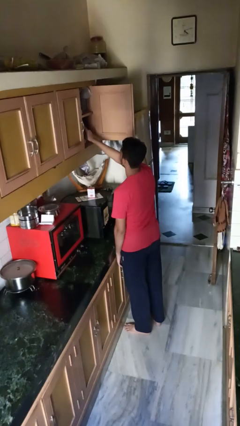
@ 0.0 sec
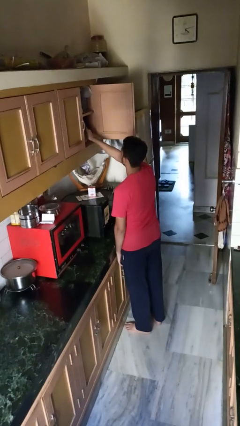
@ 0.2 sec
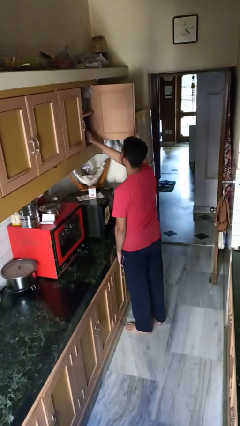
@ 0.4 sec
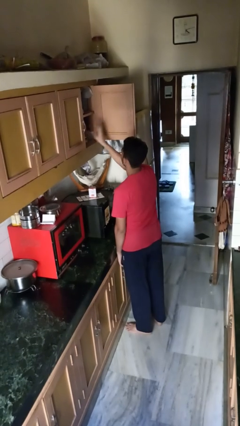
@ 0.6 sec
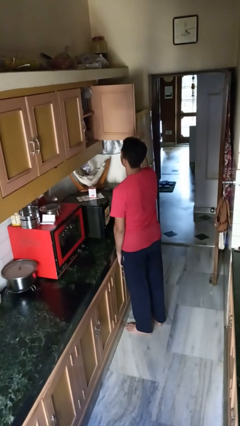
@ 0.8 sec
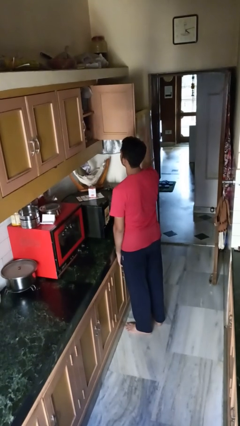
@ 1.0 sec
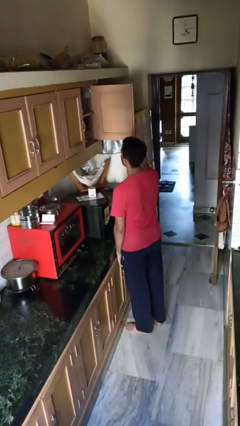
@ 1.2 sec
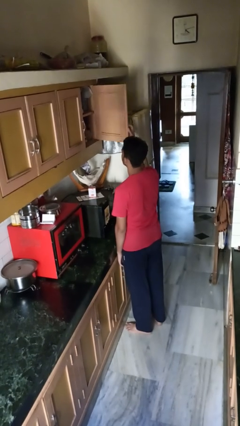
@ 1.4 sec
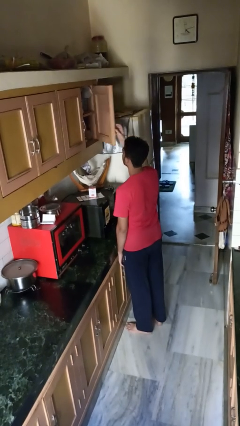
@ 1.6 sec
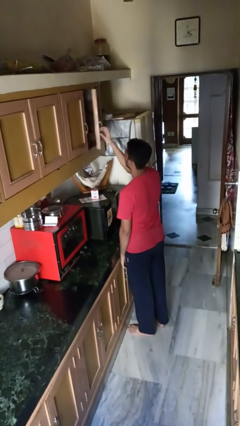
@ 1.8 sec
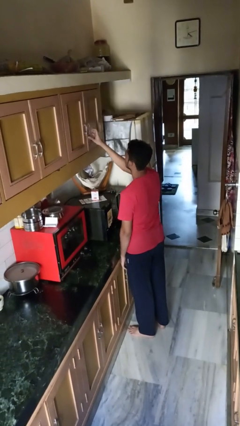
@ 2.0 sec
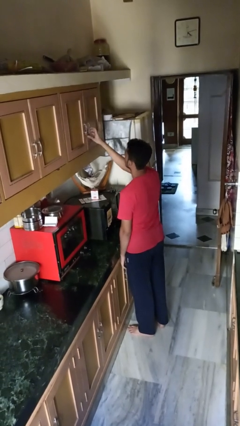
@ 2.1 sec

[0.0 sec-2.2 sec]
person puts object in cabinet

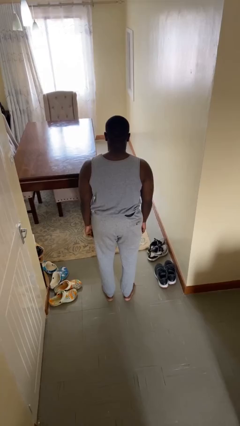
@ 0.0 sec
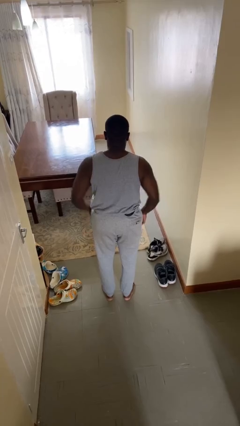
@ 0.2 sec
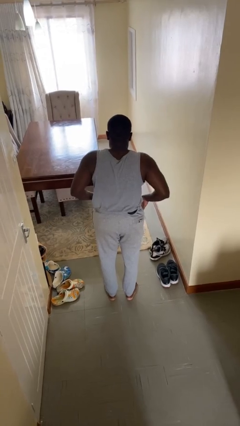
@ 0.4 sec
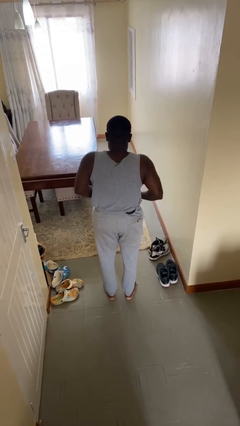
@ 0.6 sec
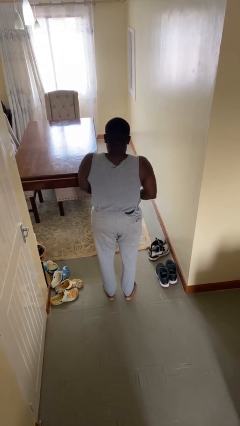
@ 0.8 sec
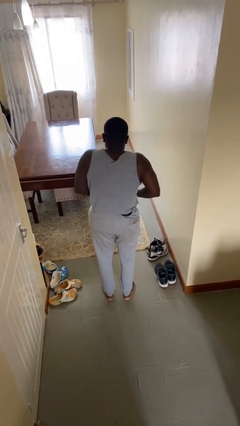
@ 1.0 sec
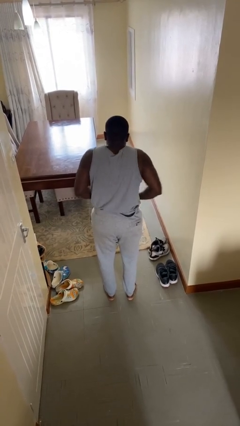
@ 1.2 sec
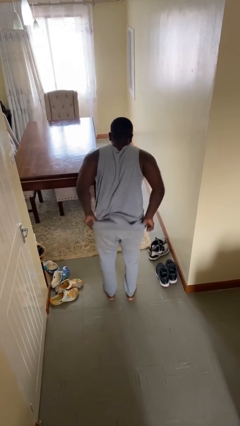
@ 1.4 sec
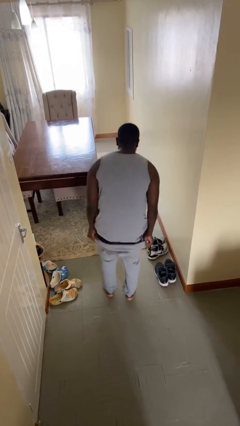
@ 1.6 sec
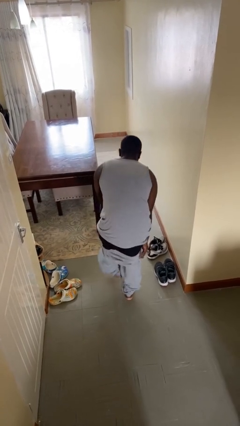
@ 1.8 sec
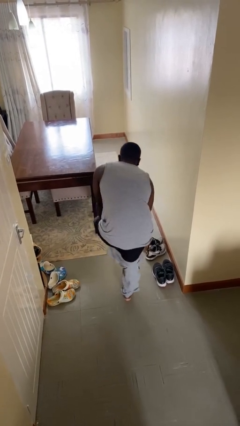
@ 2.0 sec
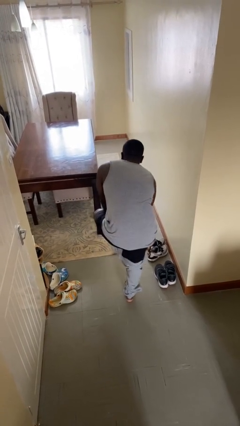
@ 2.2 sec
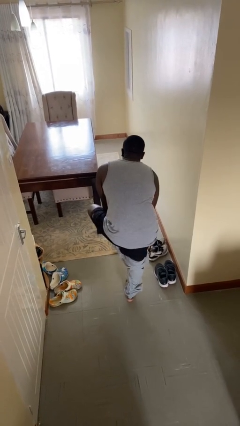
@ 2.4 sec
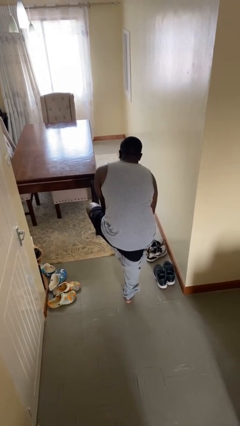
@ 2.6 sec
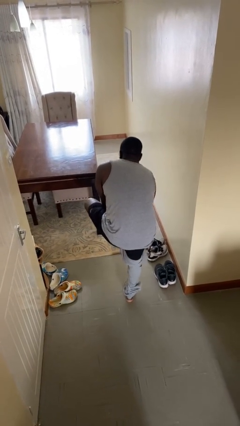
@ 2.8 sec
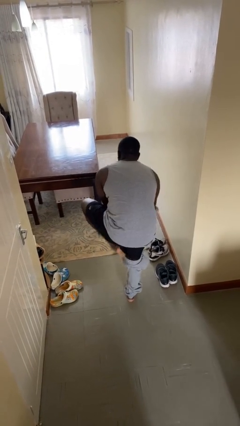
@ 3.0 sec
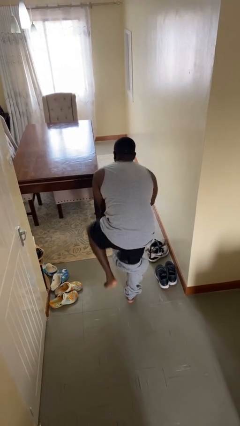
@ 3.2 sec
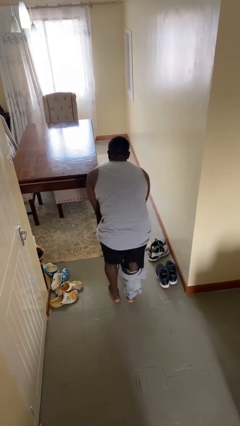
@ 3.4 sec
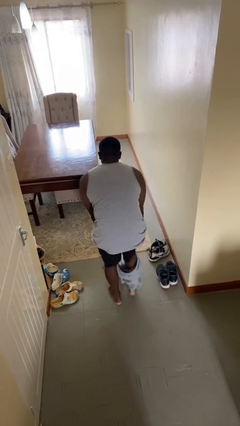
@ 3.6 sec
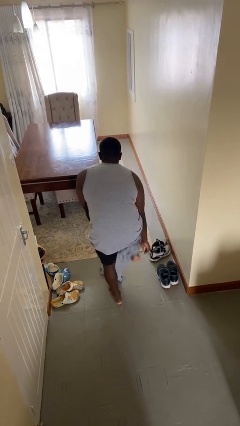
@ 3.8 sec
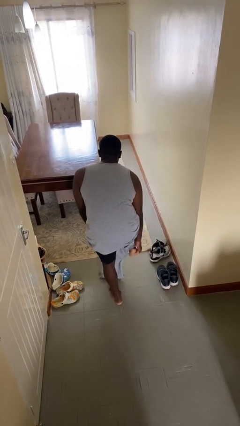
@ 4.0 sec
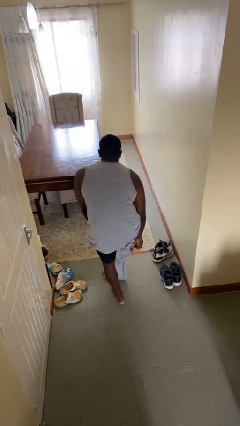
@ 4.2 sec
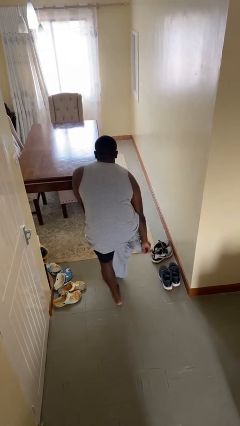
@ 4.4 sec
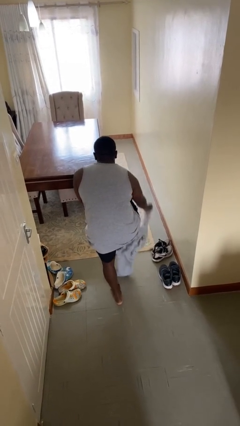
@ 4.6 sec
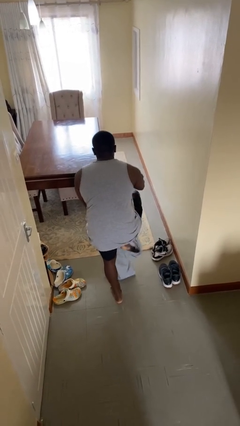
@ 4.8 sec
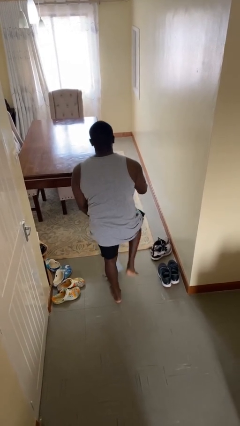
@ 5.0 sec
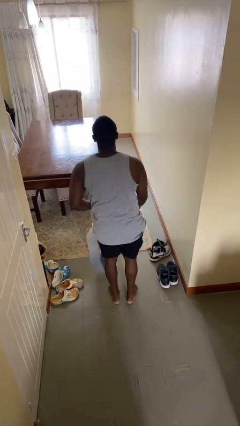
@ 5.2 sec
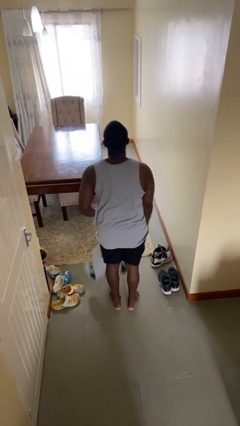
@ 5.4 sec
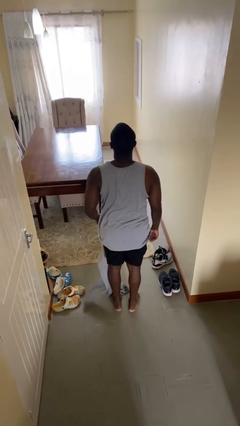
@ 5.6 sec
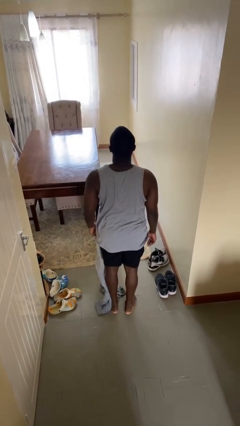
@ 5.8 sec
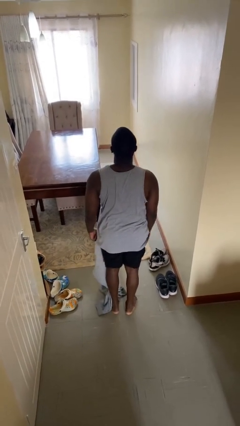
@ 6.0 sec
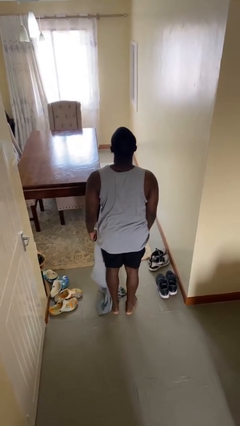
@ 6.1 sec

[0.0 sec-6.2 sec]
person takes off pants

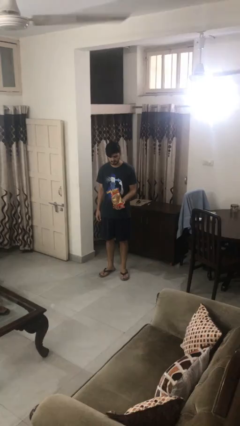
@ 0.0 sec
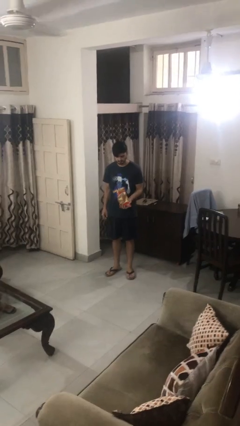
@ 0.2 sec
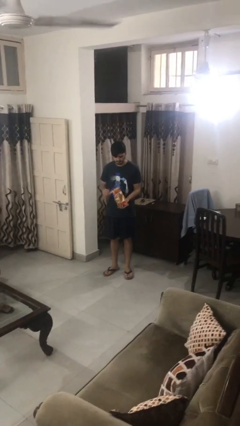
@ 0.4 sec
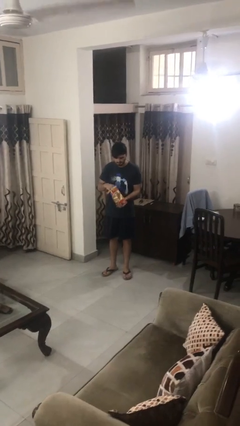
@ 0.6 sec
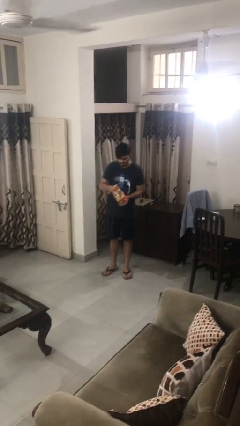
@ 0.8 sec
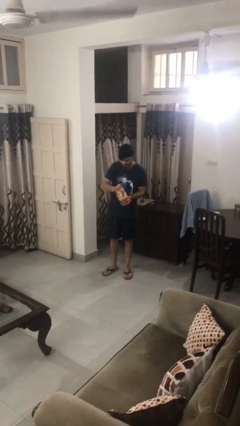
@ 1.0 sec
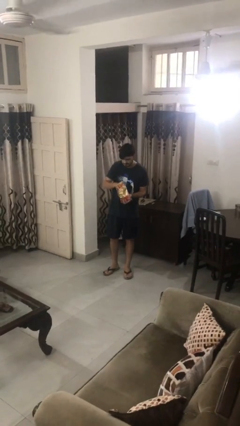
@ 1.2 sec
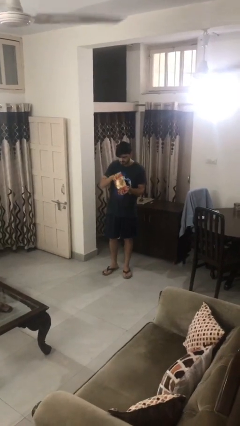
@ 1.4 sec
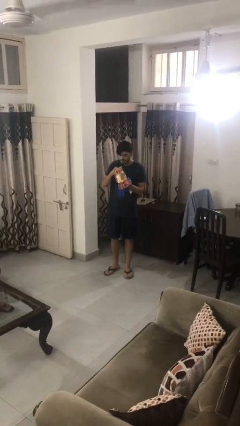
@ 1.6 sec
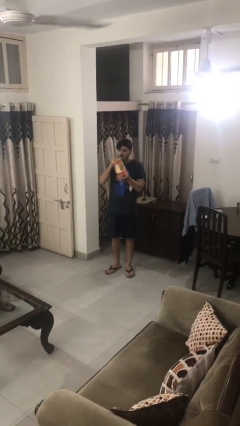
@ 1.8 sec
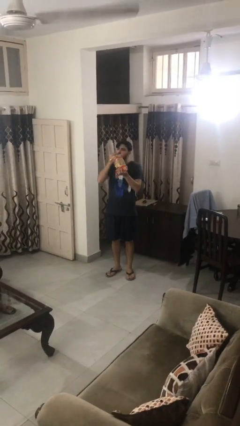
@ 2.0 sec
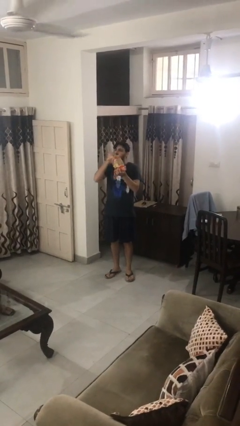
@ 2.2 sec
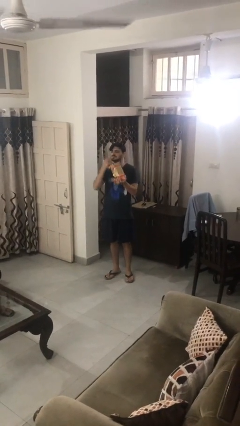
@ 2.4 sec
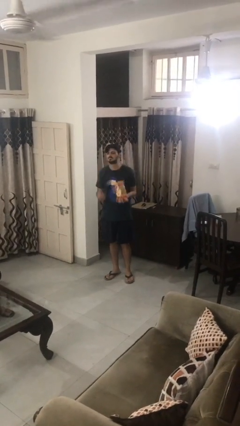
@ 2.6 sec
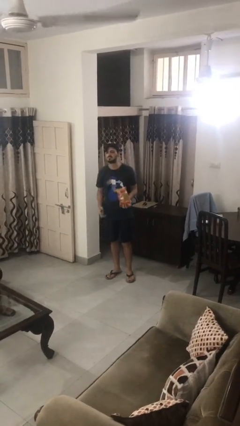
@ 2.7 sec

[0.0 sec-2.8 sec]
person eats snack from bag

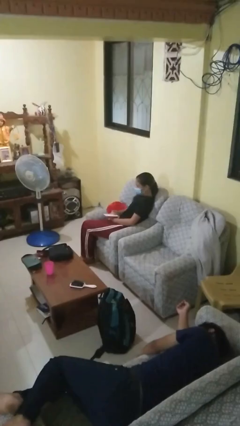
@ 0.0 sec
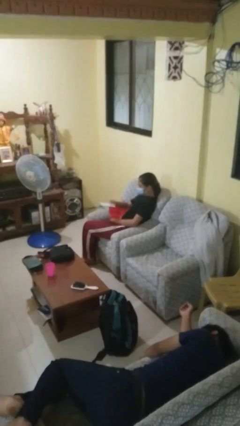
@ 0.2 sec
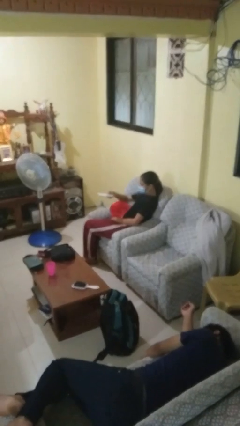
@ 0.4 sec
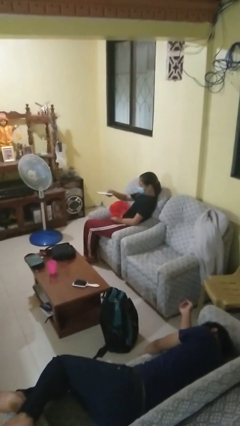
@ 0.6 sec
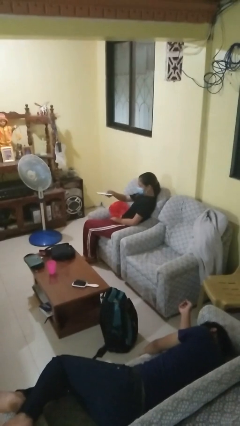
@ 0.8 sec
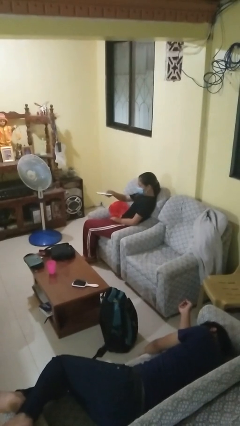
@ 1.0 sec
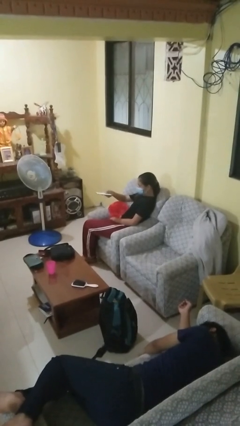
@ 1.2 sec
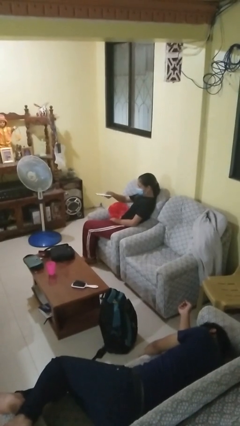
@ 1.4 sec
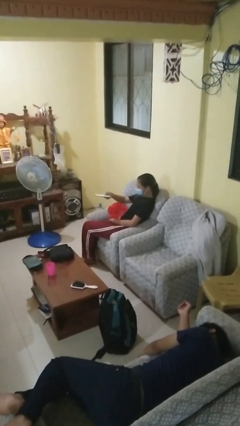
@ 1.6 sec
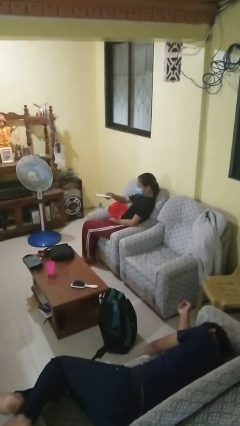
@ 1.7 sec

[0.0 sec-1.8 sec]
person uses television remote

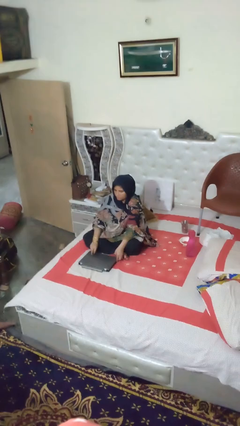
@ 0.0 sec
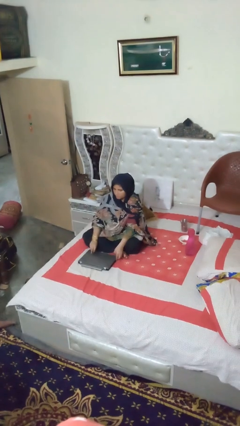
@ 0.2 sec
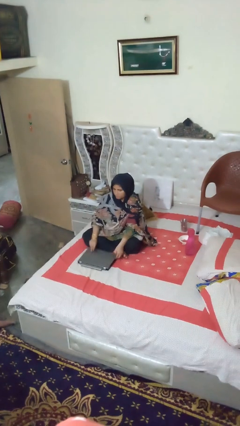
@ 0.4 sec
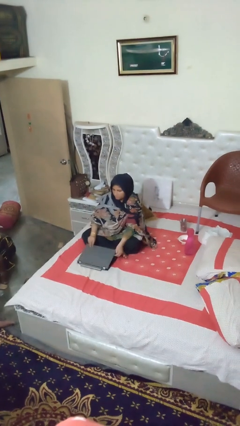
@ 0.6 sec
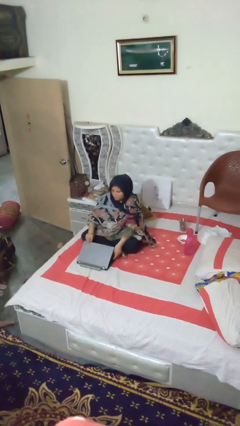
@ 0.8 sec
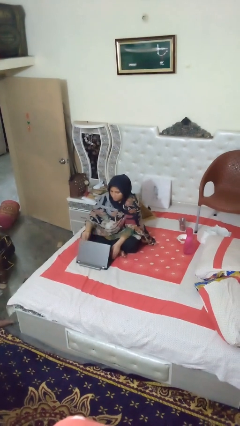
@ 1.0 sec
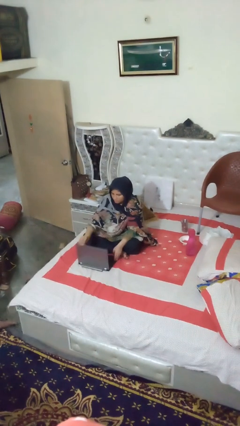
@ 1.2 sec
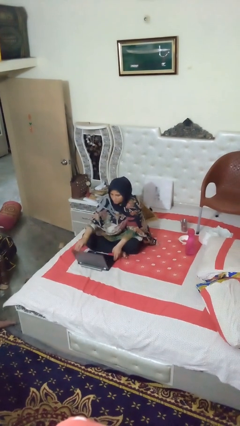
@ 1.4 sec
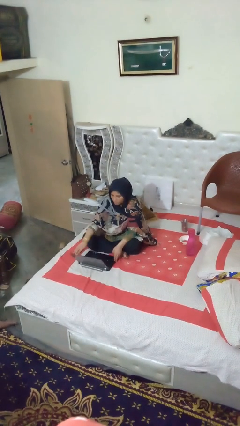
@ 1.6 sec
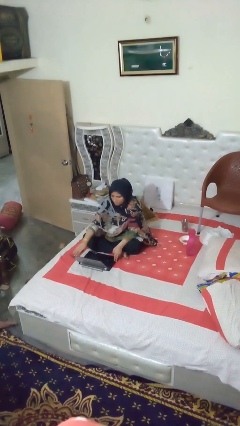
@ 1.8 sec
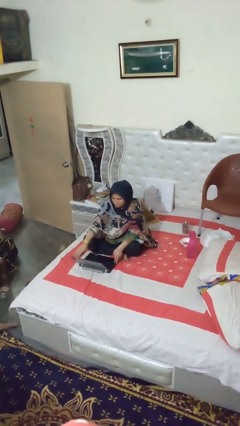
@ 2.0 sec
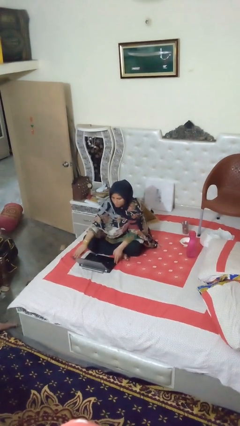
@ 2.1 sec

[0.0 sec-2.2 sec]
person opens laptop

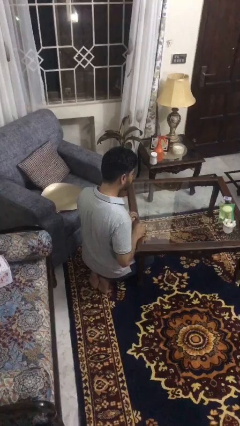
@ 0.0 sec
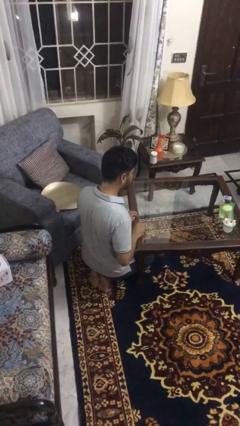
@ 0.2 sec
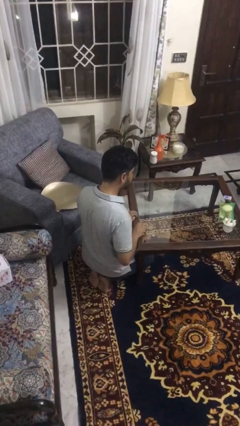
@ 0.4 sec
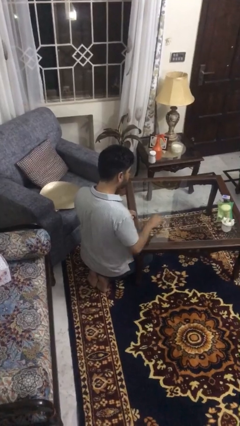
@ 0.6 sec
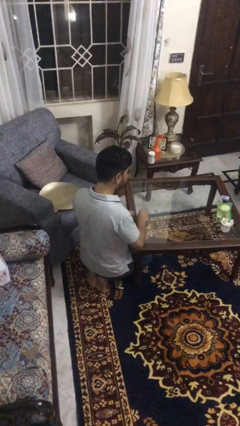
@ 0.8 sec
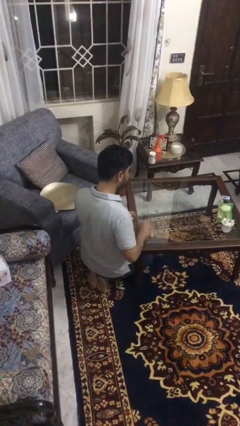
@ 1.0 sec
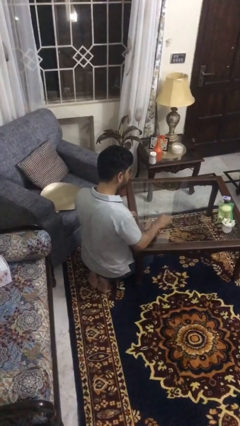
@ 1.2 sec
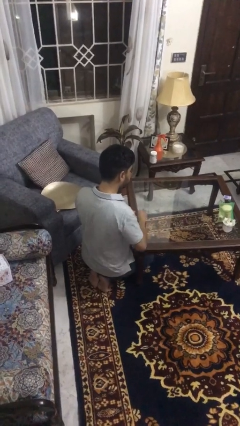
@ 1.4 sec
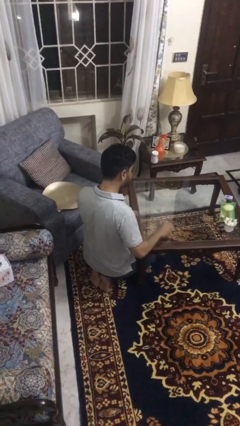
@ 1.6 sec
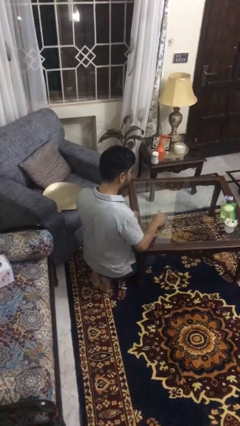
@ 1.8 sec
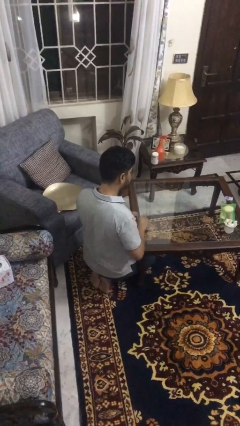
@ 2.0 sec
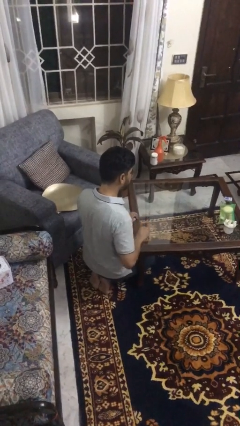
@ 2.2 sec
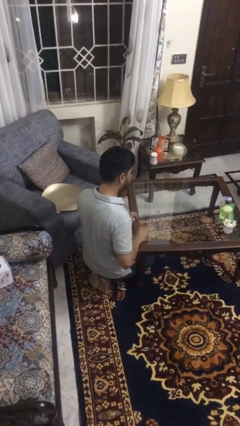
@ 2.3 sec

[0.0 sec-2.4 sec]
person cleans table with rag
